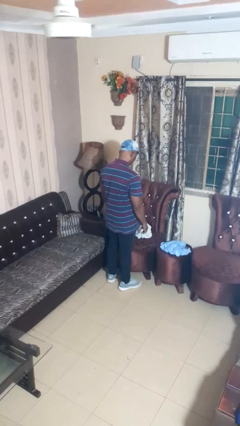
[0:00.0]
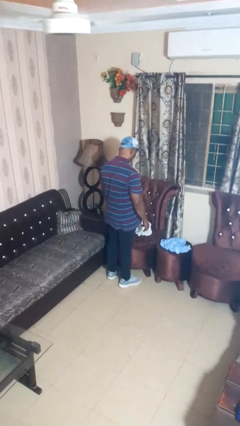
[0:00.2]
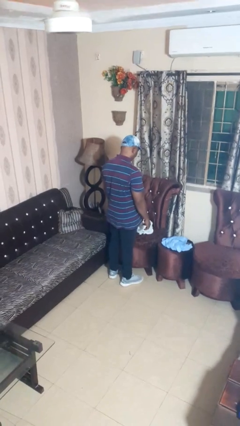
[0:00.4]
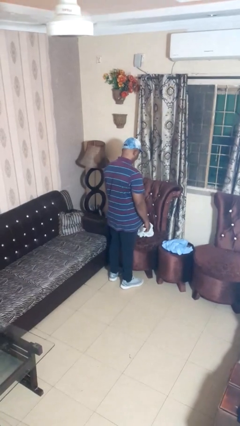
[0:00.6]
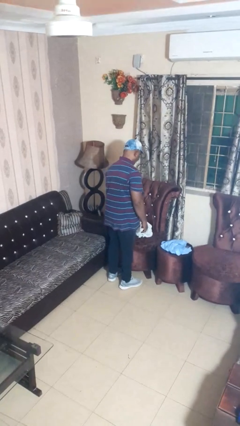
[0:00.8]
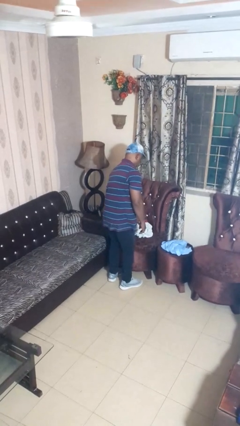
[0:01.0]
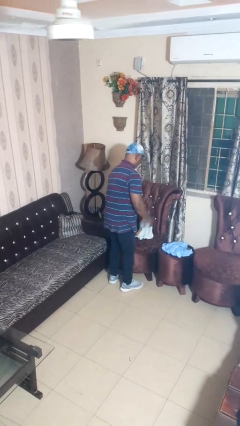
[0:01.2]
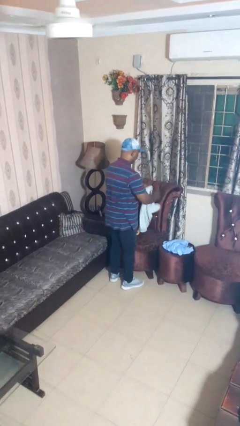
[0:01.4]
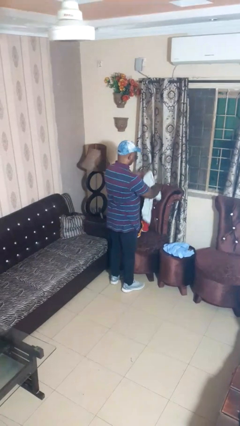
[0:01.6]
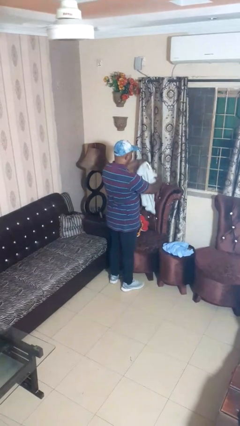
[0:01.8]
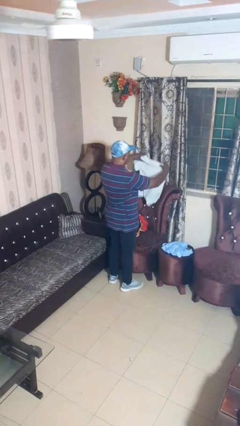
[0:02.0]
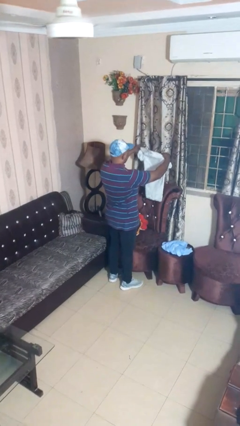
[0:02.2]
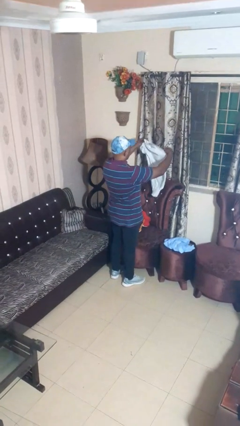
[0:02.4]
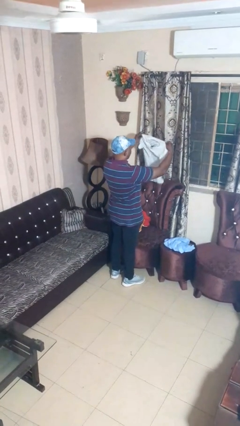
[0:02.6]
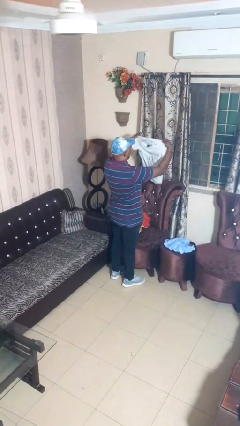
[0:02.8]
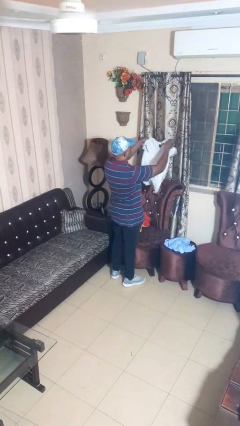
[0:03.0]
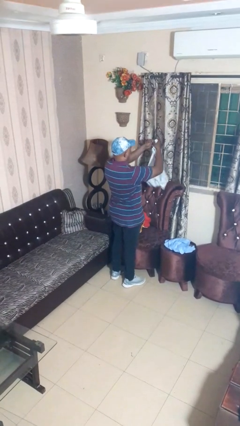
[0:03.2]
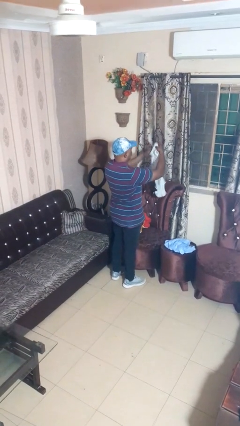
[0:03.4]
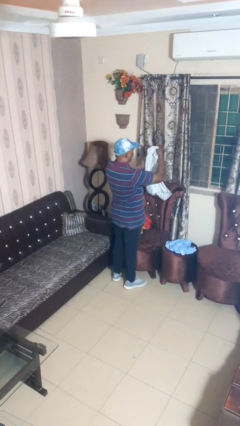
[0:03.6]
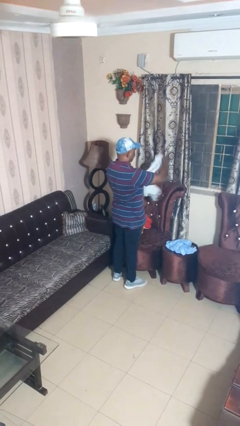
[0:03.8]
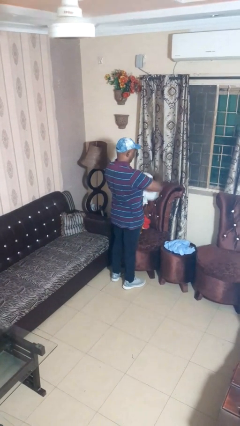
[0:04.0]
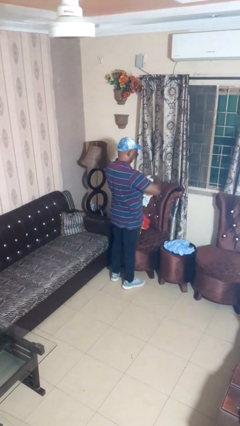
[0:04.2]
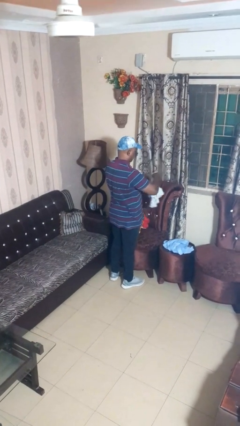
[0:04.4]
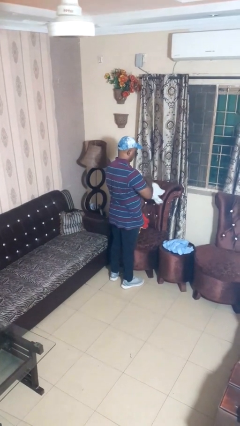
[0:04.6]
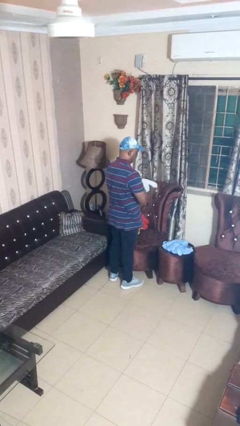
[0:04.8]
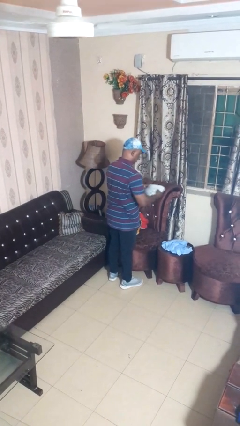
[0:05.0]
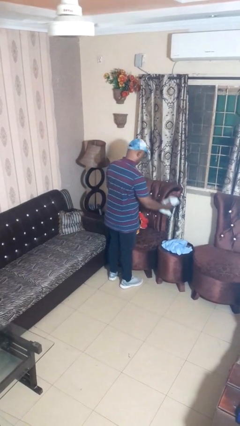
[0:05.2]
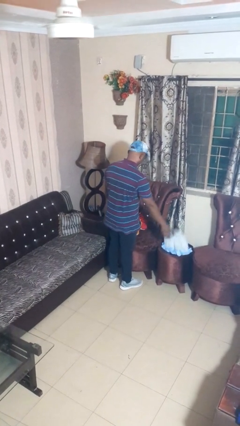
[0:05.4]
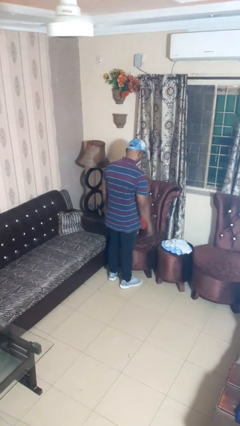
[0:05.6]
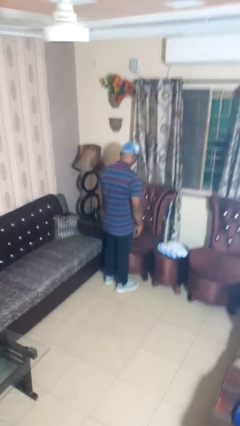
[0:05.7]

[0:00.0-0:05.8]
person folds shirt

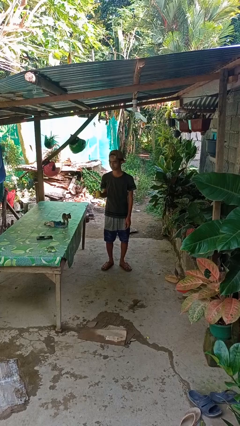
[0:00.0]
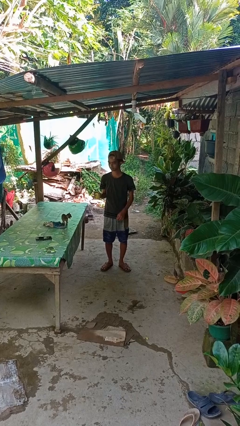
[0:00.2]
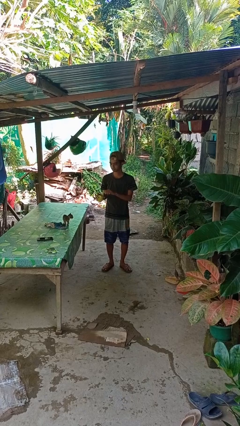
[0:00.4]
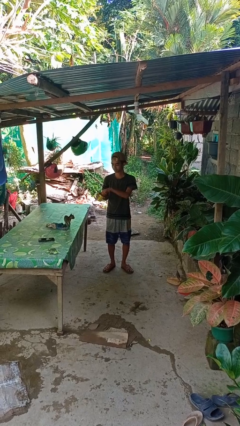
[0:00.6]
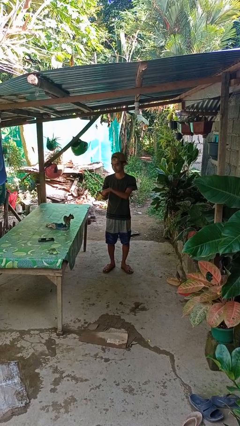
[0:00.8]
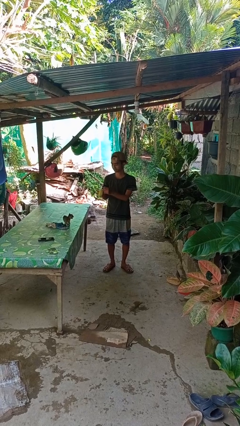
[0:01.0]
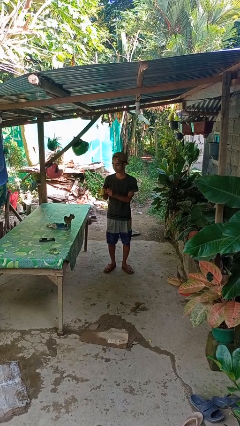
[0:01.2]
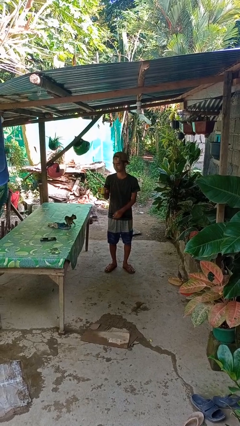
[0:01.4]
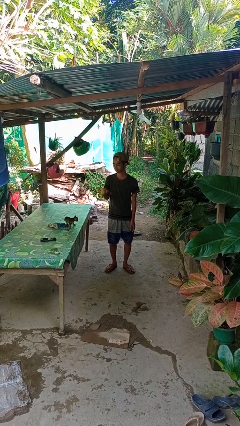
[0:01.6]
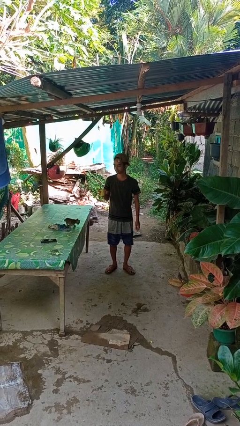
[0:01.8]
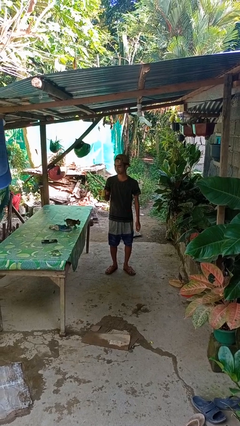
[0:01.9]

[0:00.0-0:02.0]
person opens beverage can

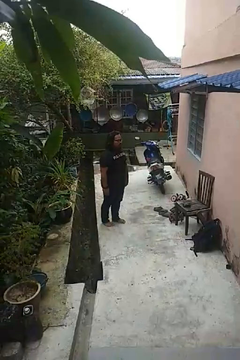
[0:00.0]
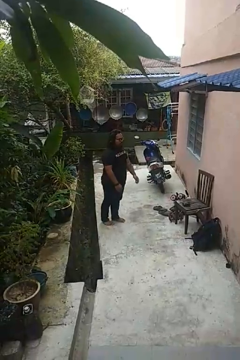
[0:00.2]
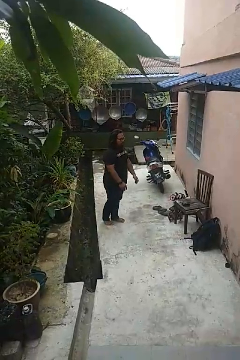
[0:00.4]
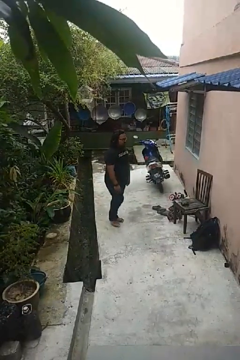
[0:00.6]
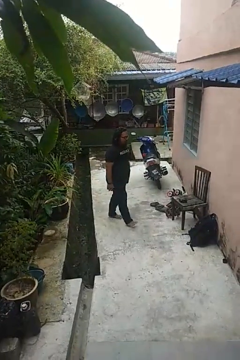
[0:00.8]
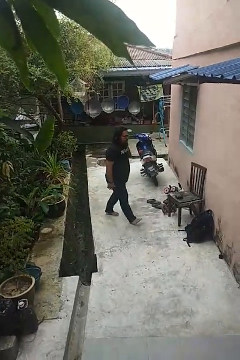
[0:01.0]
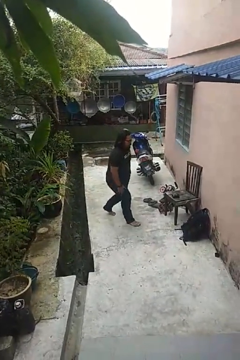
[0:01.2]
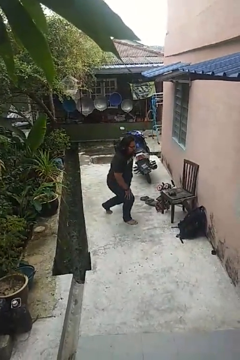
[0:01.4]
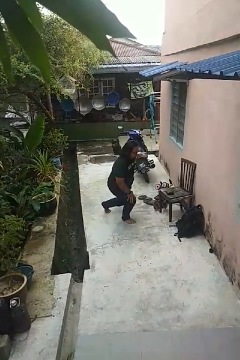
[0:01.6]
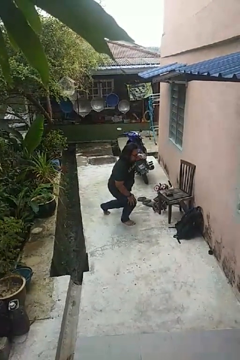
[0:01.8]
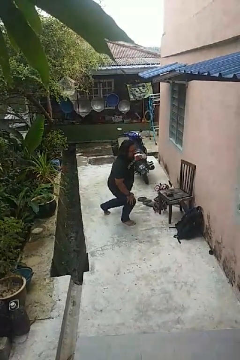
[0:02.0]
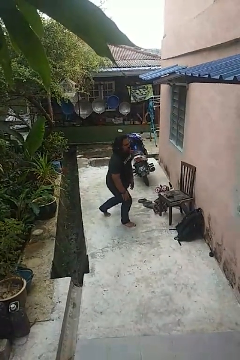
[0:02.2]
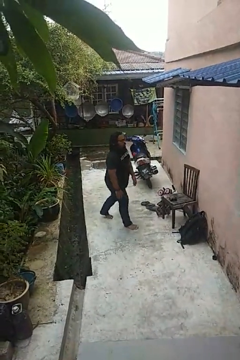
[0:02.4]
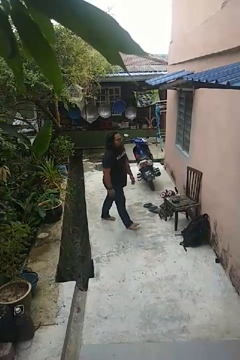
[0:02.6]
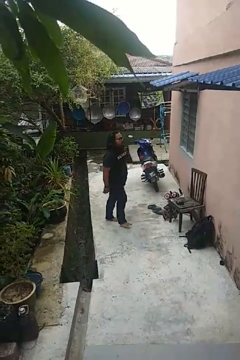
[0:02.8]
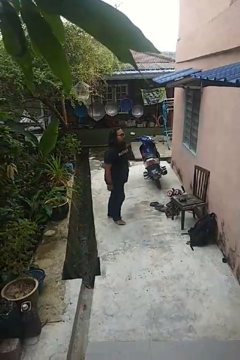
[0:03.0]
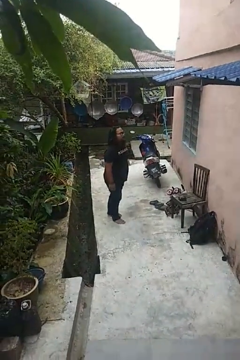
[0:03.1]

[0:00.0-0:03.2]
person exercises with lunges

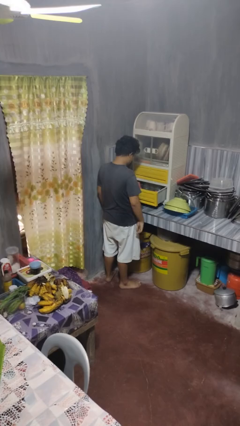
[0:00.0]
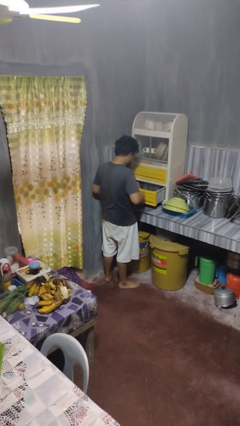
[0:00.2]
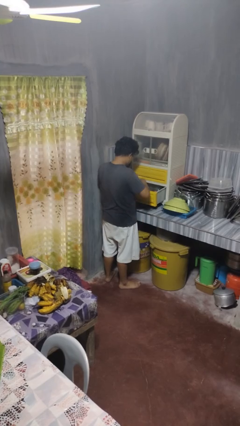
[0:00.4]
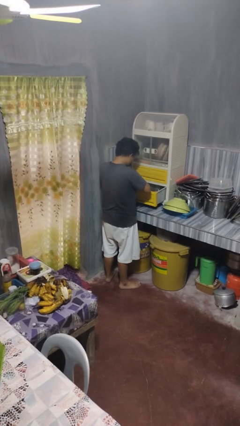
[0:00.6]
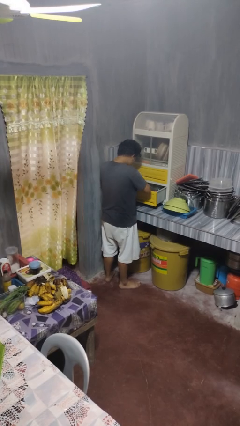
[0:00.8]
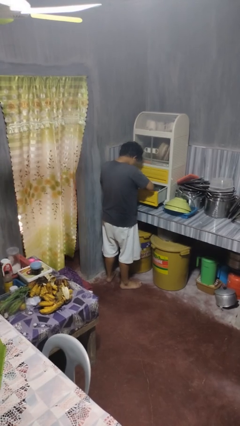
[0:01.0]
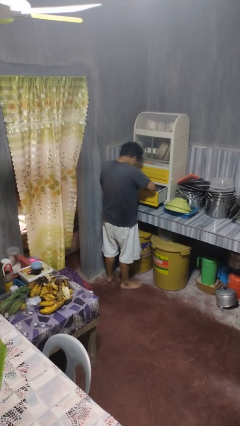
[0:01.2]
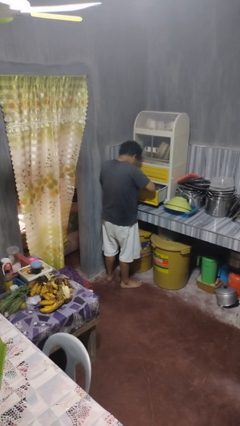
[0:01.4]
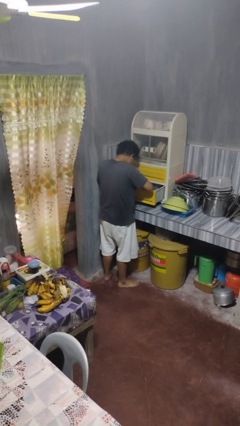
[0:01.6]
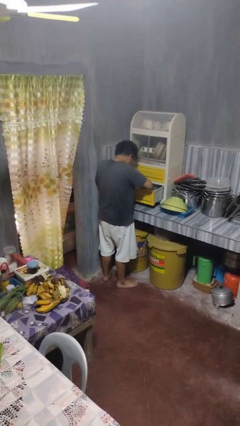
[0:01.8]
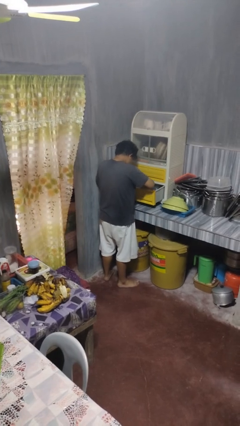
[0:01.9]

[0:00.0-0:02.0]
person searches in kitchen drawer

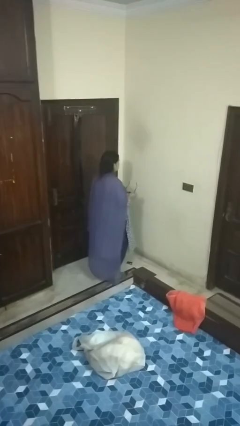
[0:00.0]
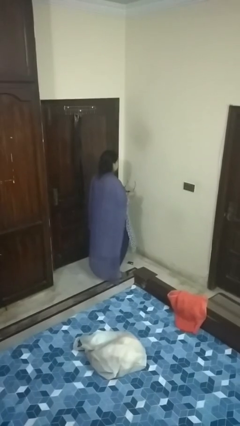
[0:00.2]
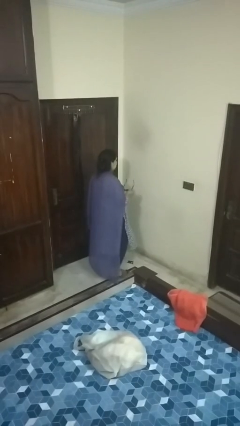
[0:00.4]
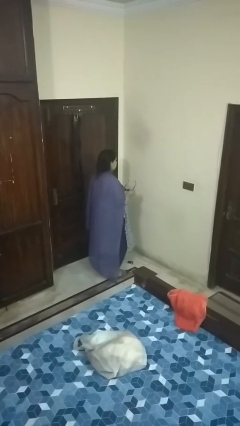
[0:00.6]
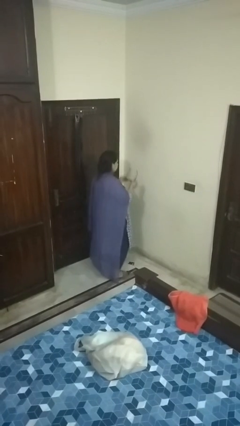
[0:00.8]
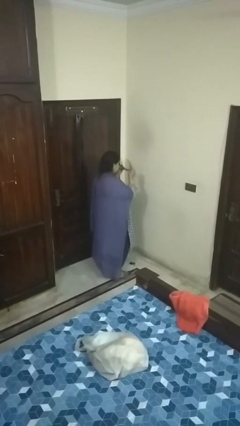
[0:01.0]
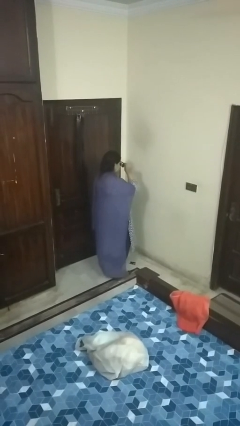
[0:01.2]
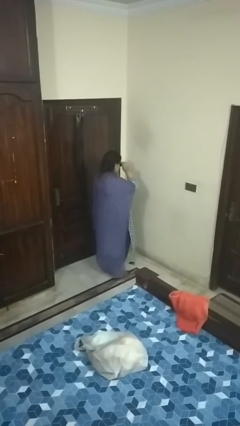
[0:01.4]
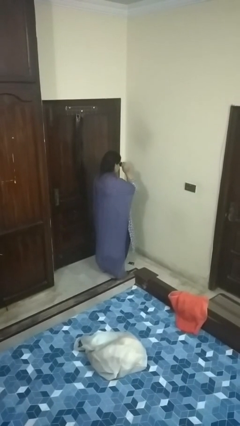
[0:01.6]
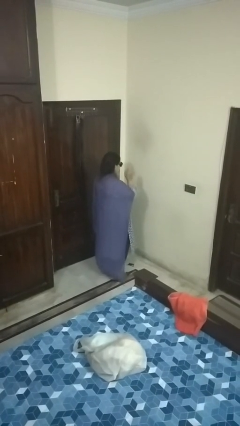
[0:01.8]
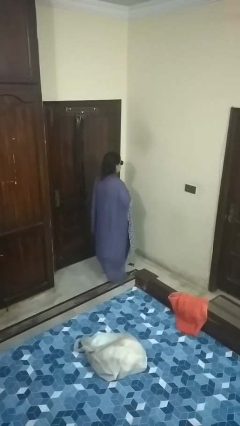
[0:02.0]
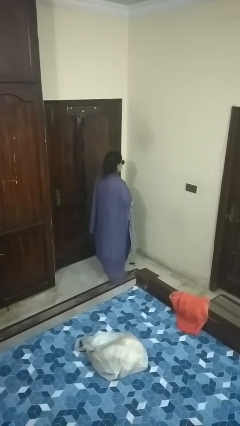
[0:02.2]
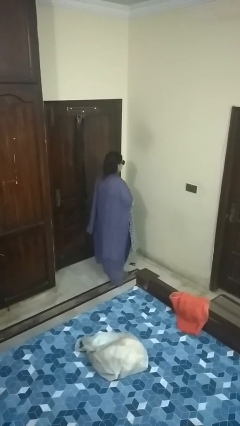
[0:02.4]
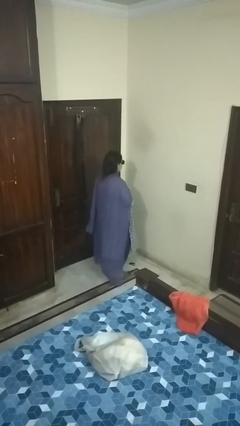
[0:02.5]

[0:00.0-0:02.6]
person puts on sunglasses

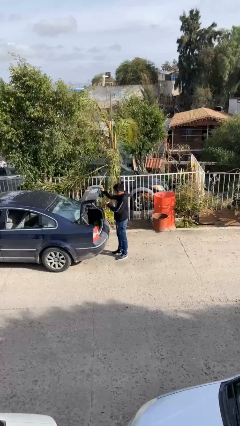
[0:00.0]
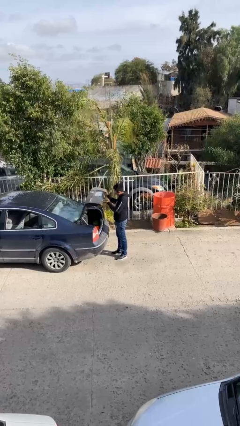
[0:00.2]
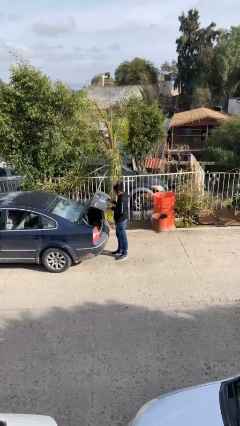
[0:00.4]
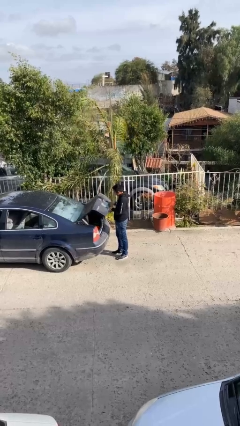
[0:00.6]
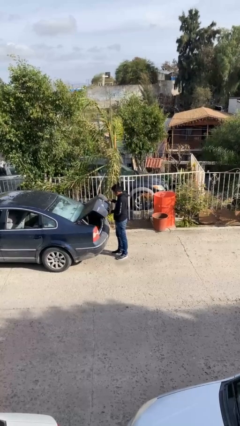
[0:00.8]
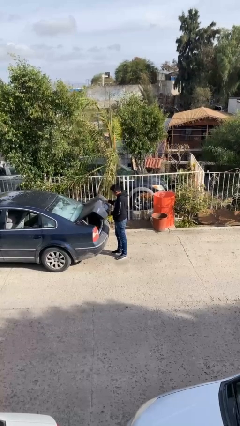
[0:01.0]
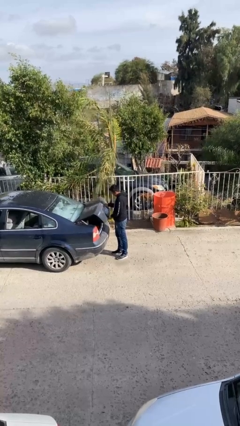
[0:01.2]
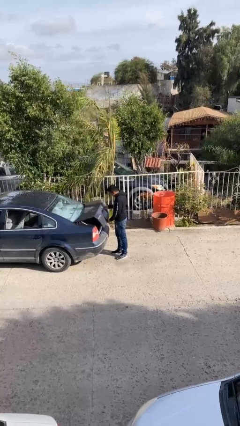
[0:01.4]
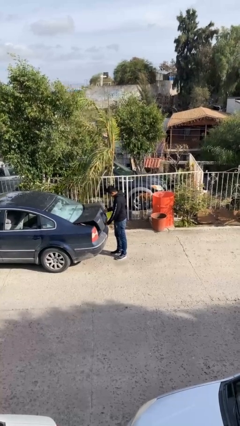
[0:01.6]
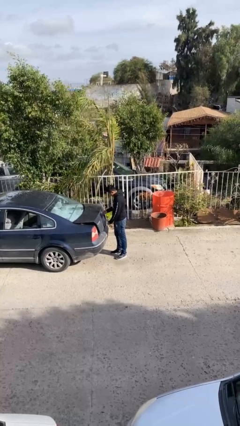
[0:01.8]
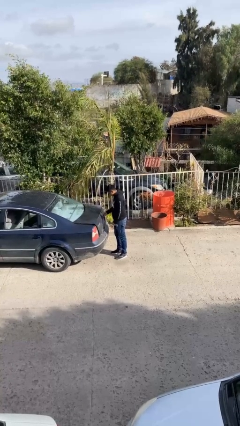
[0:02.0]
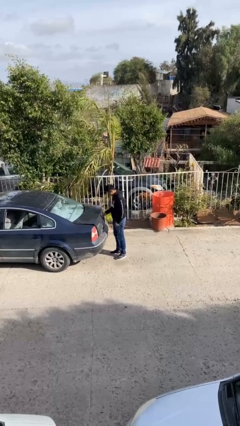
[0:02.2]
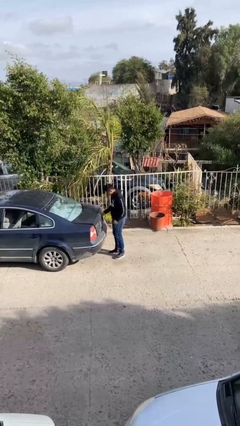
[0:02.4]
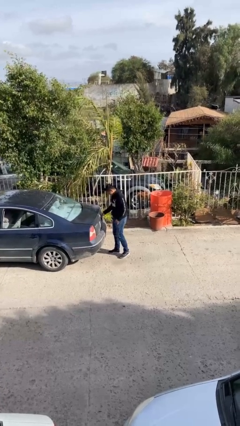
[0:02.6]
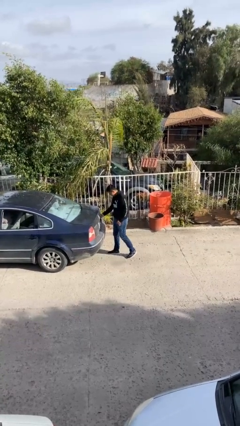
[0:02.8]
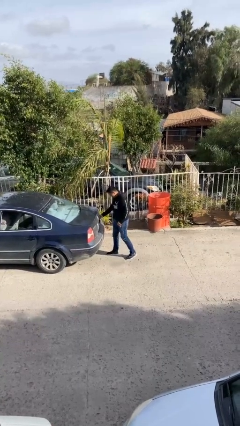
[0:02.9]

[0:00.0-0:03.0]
person closes car trunk
